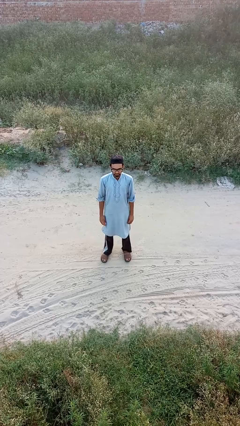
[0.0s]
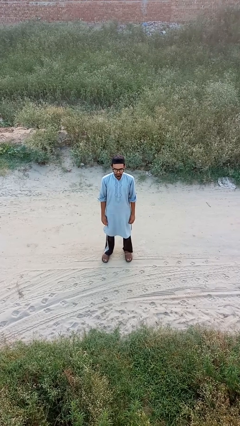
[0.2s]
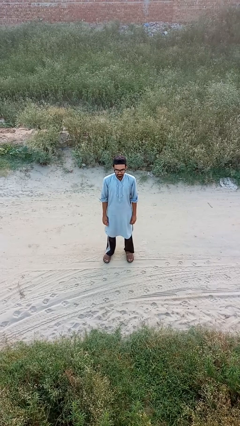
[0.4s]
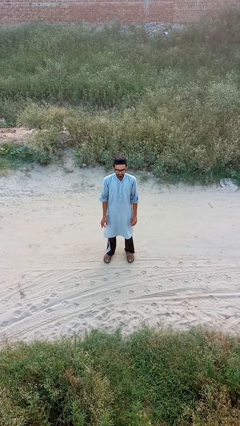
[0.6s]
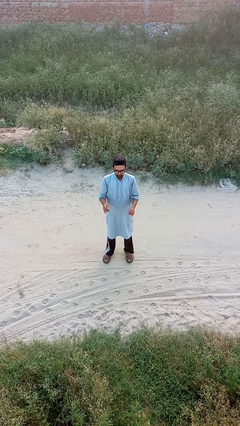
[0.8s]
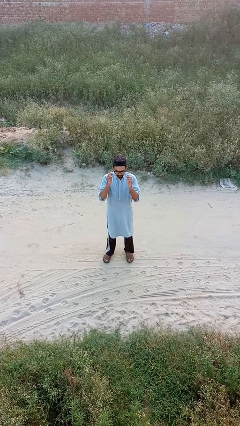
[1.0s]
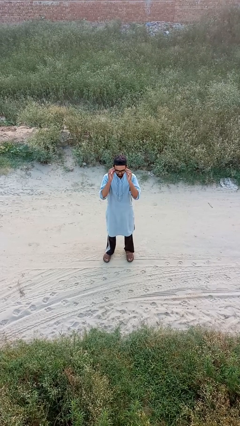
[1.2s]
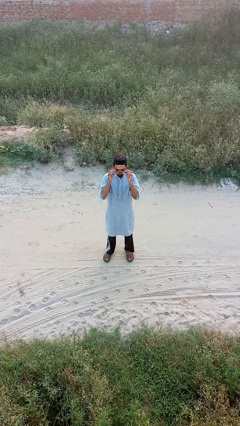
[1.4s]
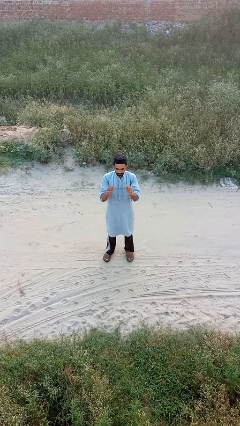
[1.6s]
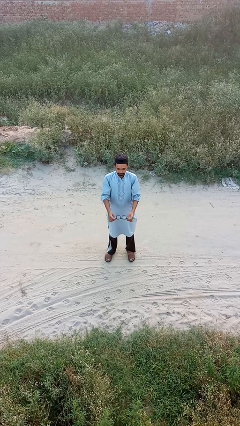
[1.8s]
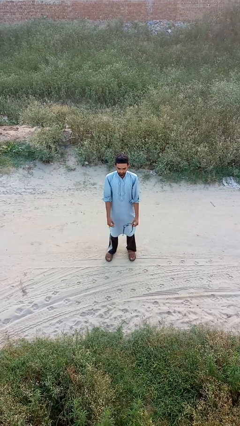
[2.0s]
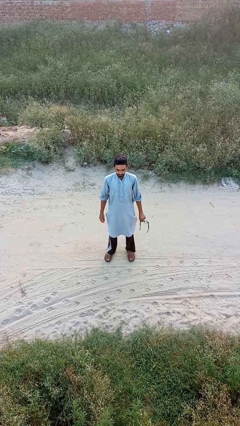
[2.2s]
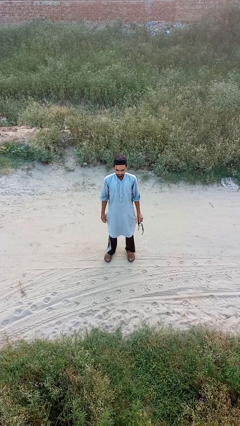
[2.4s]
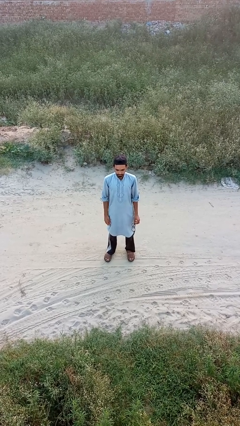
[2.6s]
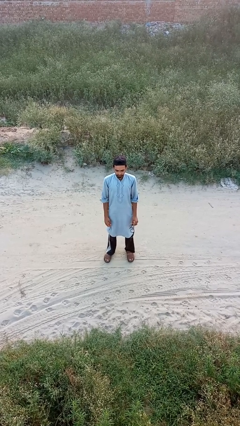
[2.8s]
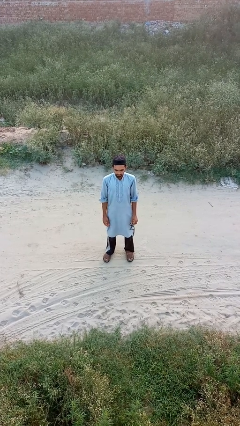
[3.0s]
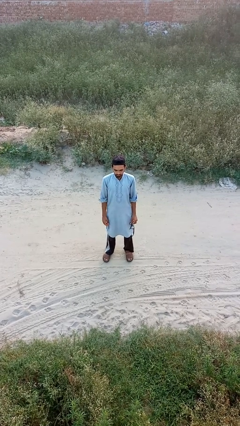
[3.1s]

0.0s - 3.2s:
person takes off glasses

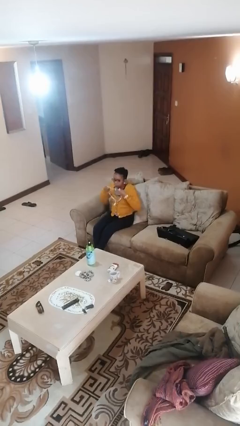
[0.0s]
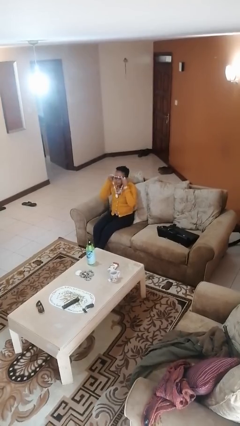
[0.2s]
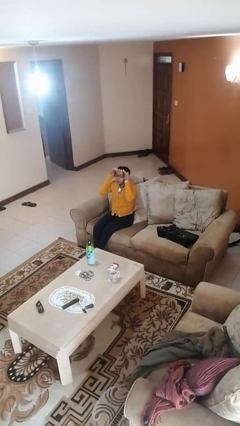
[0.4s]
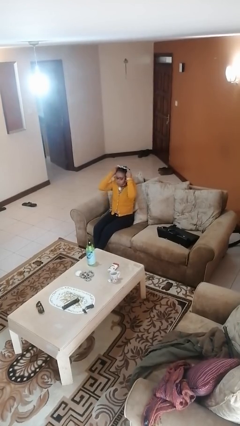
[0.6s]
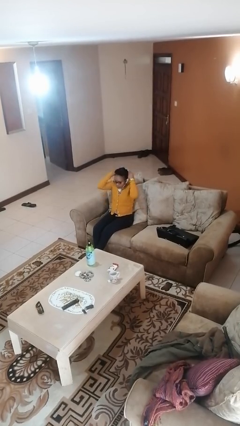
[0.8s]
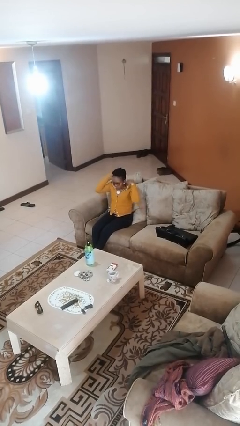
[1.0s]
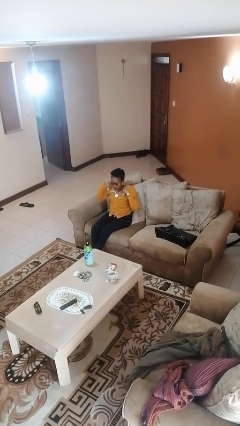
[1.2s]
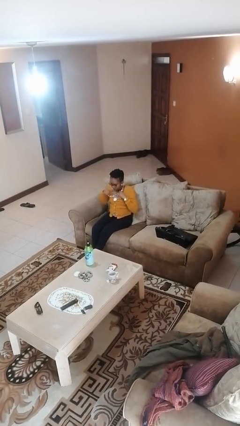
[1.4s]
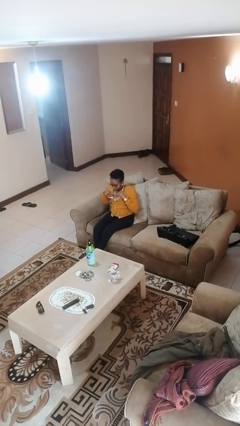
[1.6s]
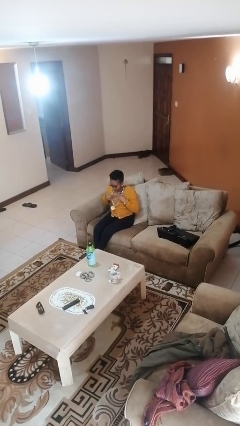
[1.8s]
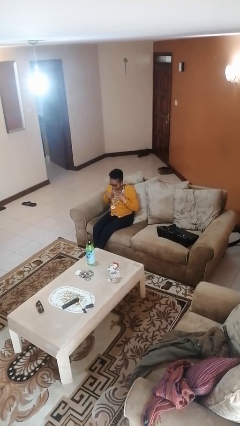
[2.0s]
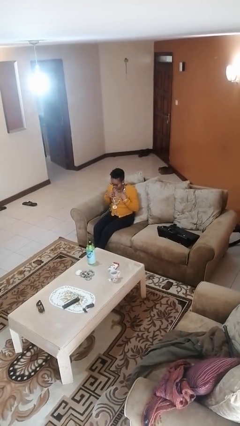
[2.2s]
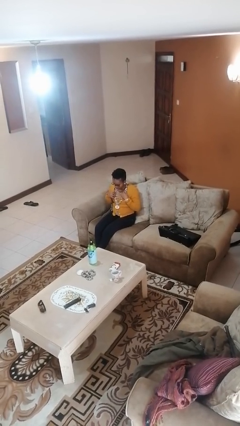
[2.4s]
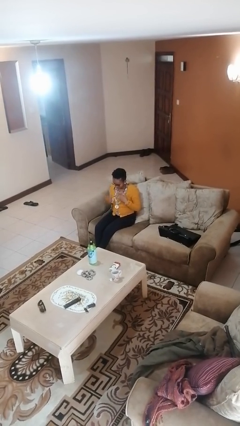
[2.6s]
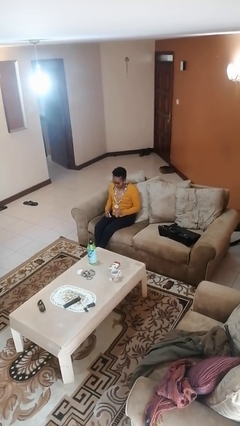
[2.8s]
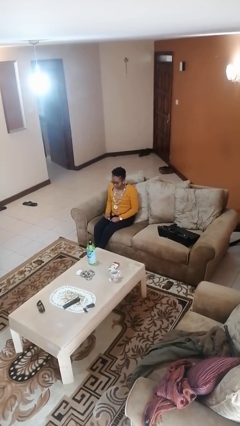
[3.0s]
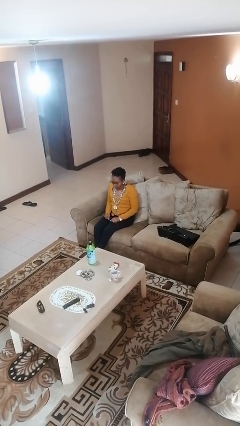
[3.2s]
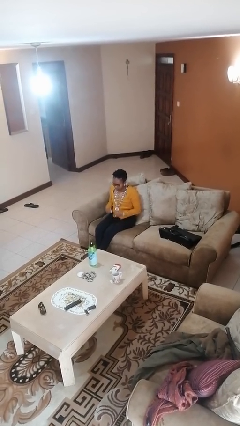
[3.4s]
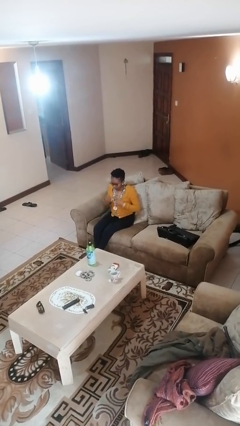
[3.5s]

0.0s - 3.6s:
person puts on necklace

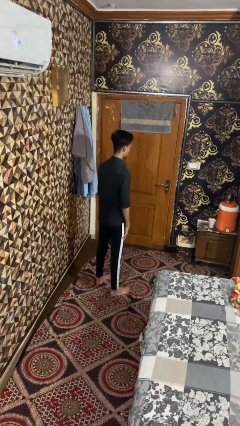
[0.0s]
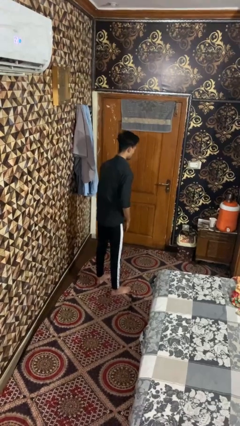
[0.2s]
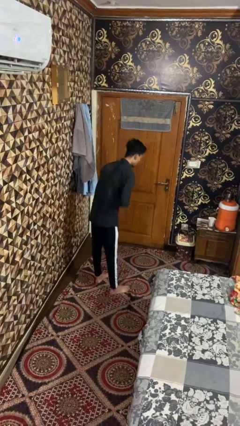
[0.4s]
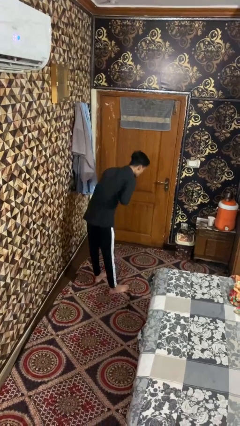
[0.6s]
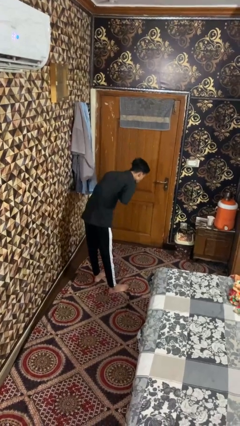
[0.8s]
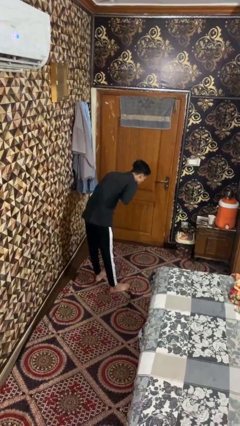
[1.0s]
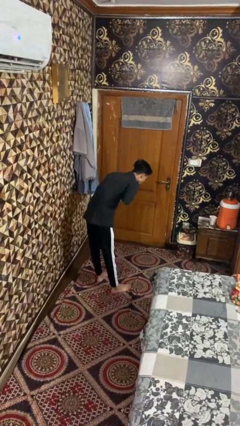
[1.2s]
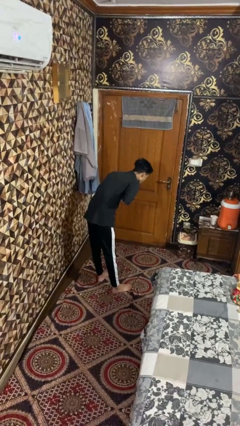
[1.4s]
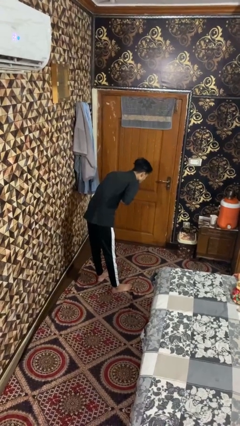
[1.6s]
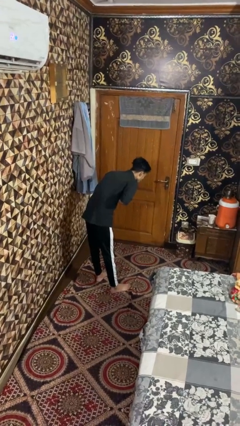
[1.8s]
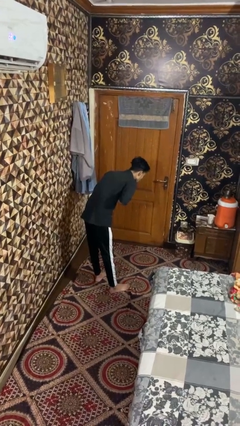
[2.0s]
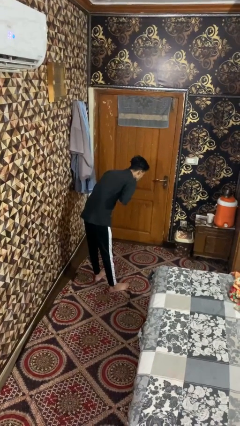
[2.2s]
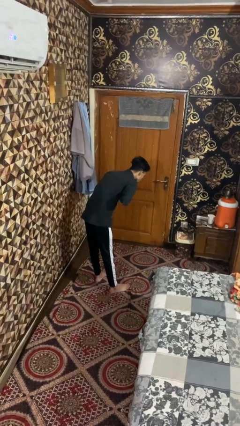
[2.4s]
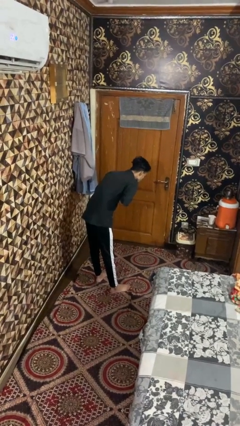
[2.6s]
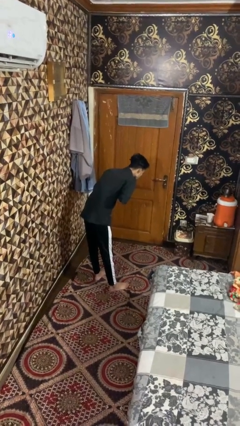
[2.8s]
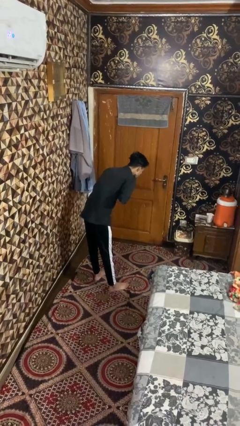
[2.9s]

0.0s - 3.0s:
person bows

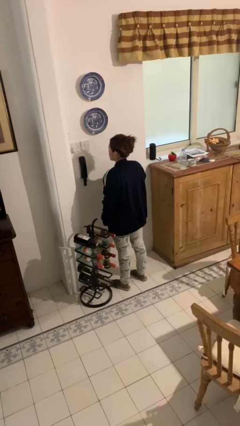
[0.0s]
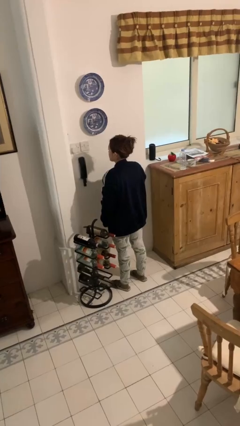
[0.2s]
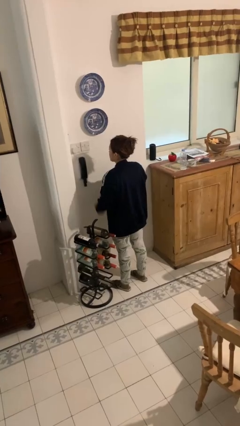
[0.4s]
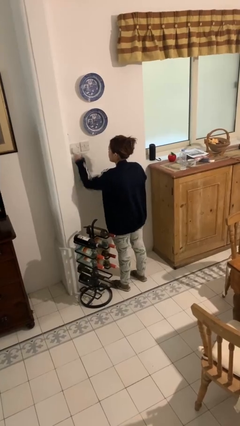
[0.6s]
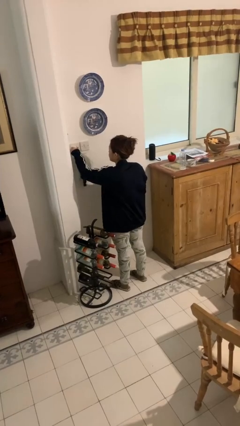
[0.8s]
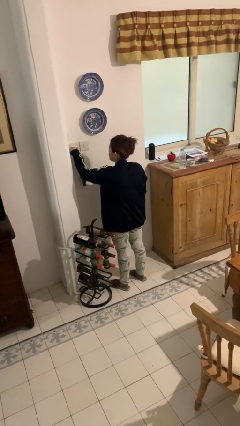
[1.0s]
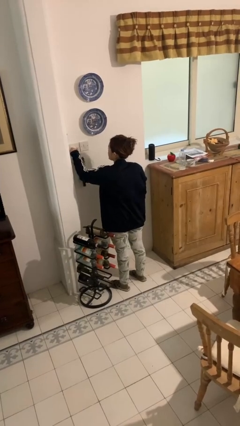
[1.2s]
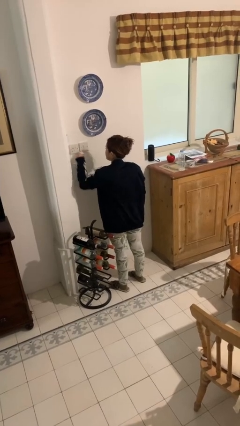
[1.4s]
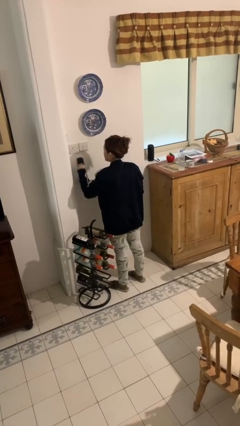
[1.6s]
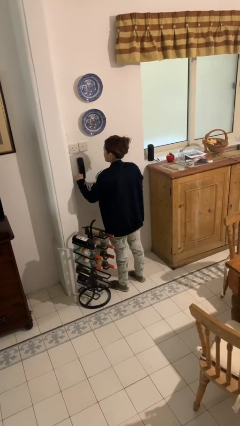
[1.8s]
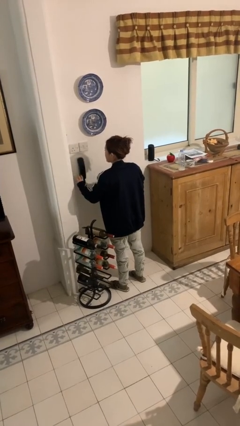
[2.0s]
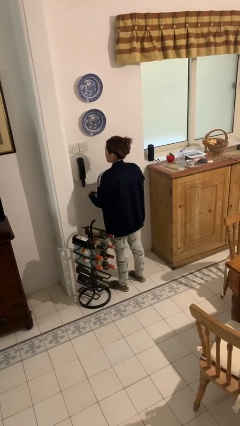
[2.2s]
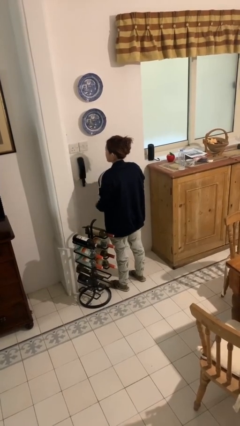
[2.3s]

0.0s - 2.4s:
person unplugs from electrical socket

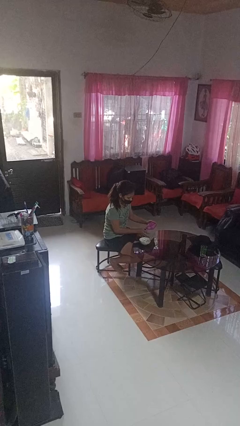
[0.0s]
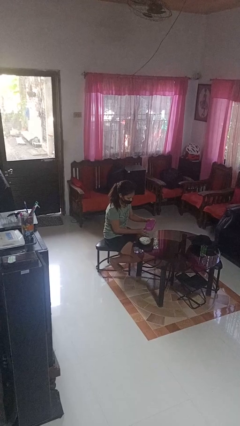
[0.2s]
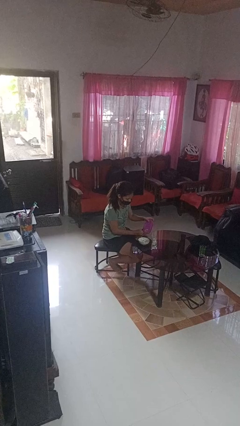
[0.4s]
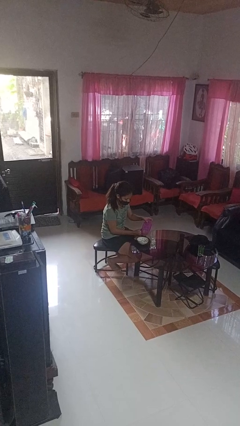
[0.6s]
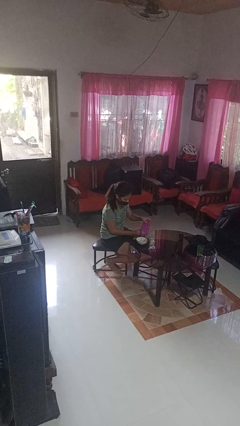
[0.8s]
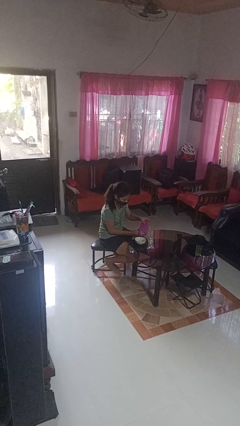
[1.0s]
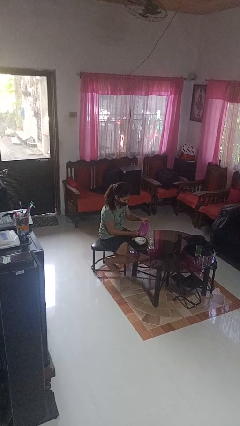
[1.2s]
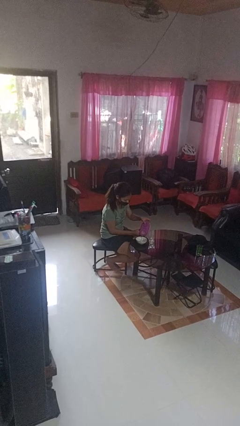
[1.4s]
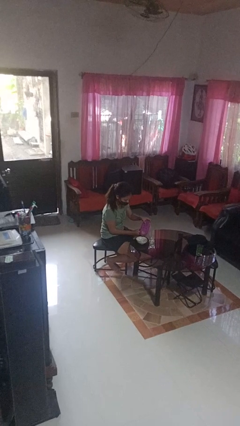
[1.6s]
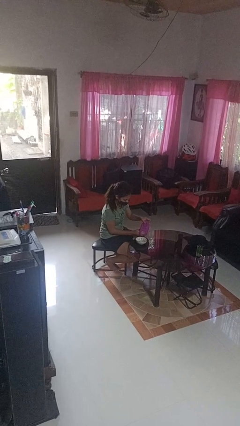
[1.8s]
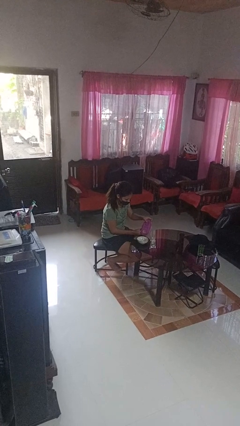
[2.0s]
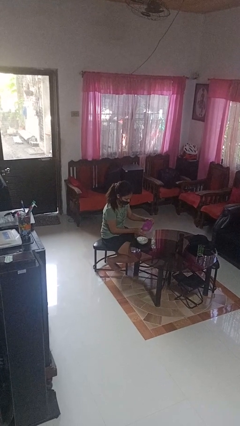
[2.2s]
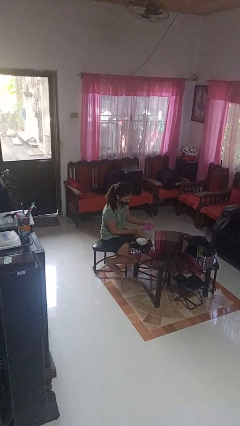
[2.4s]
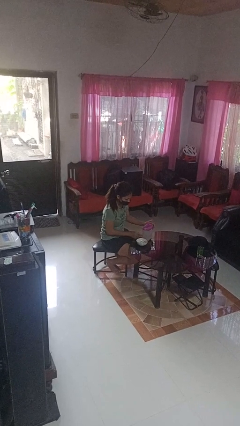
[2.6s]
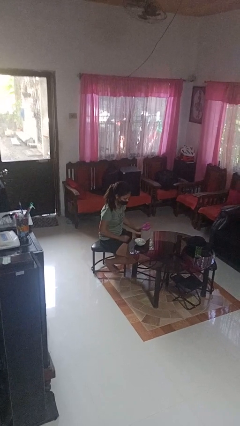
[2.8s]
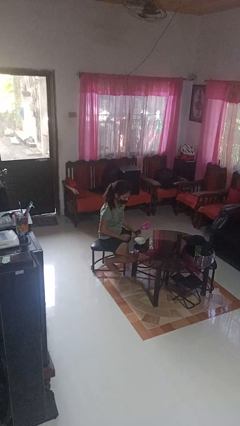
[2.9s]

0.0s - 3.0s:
person pours into bowl

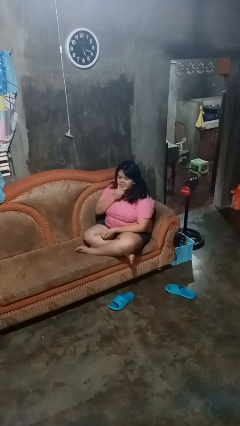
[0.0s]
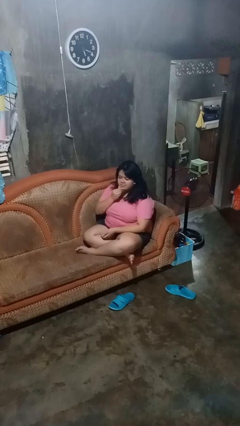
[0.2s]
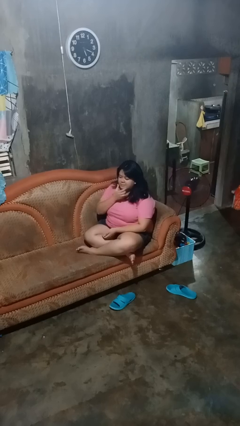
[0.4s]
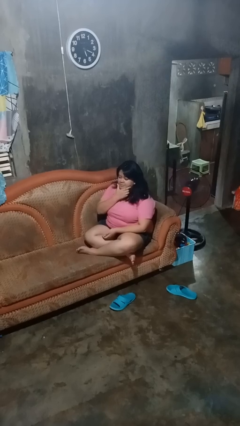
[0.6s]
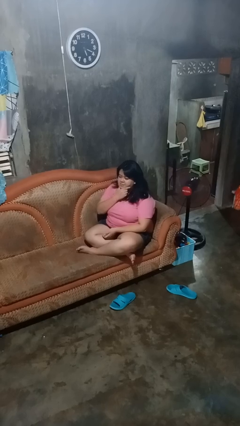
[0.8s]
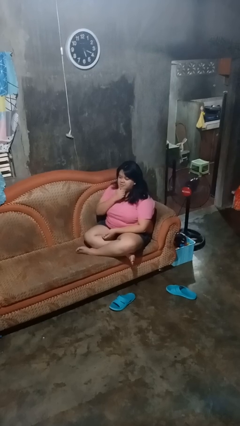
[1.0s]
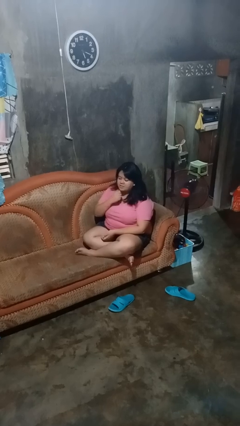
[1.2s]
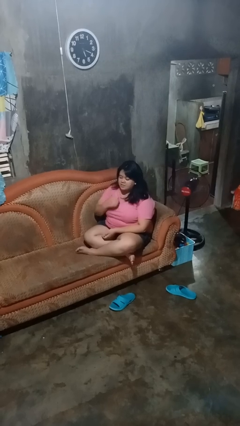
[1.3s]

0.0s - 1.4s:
person strokes chin

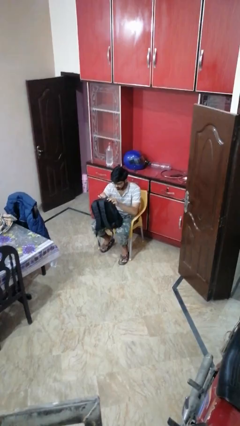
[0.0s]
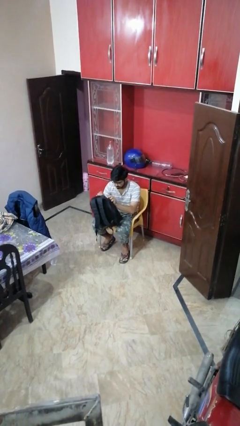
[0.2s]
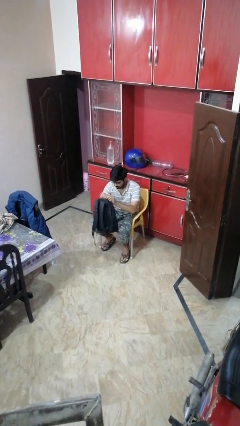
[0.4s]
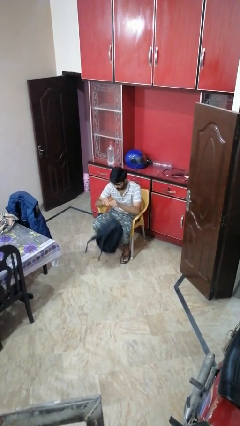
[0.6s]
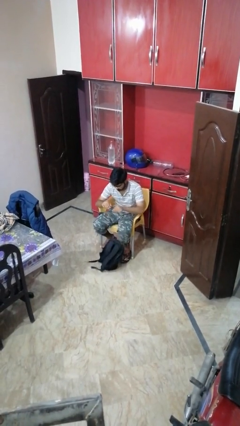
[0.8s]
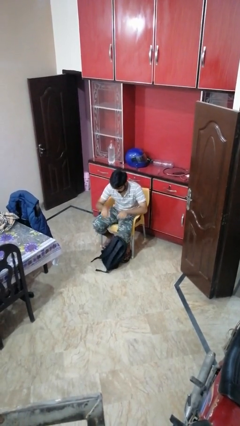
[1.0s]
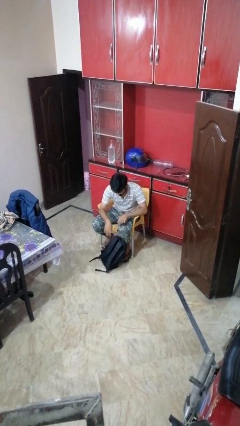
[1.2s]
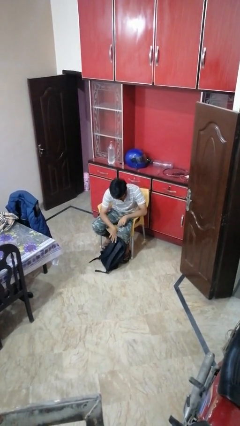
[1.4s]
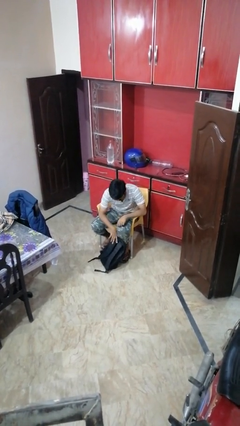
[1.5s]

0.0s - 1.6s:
person drops object
